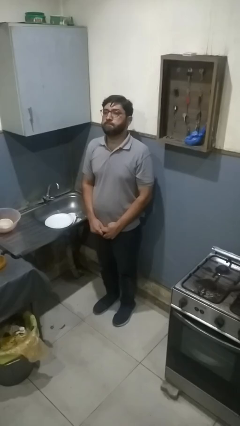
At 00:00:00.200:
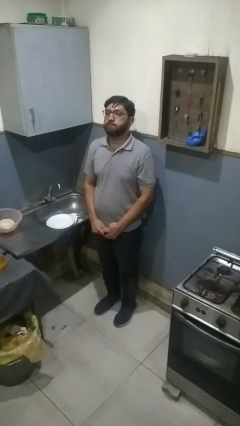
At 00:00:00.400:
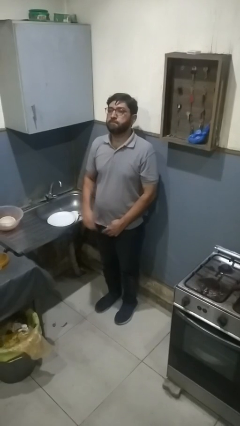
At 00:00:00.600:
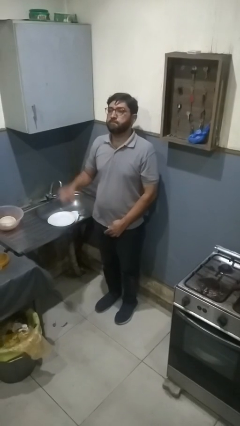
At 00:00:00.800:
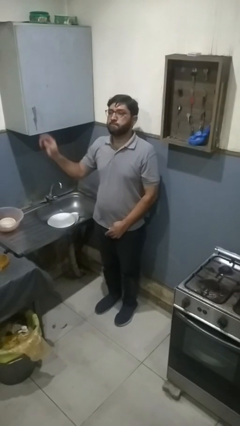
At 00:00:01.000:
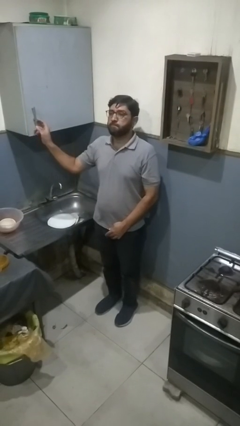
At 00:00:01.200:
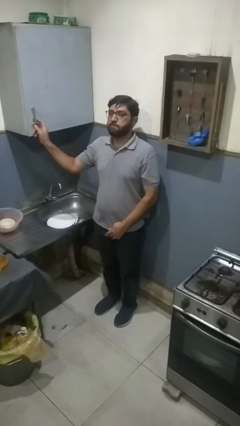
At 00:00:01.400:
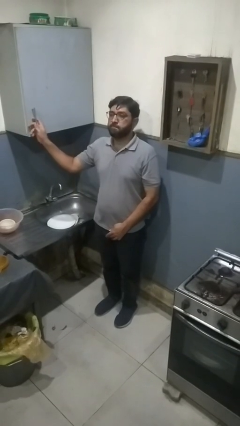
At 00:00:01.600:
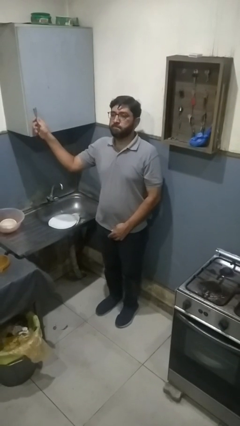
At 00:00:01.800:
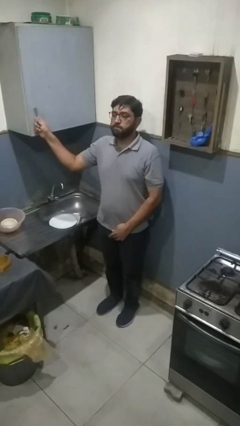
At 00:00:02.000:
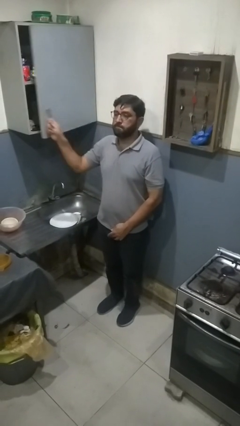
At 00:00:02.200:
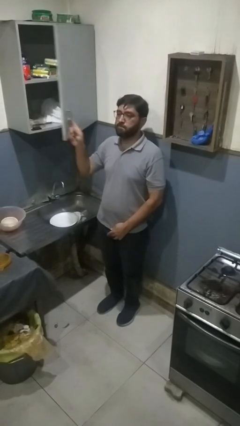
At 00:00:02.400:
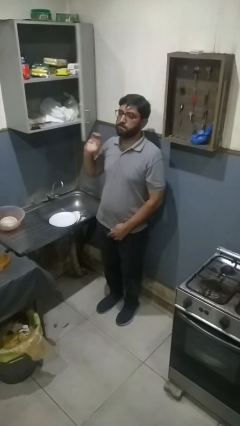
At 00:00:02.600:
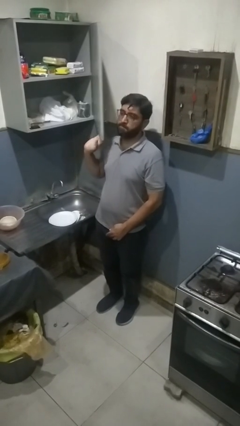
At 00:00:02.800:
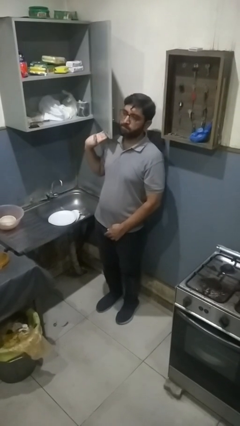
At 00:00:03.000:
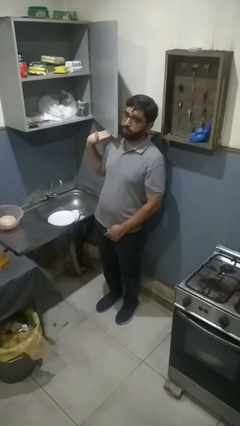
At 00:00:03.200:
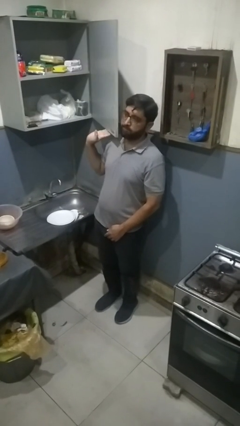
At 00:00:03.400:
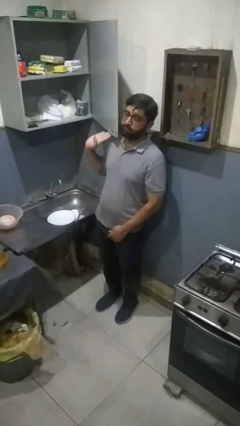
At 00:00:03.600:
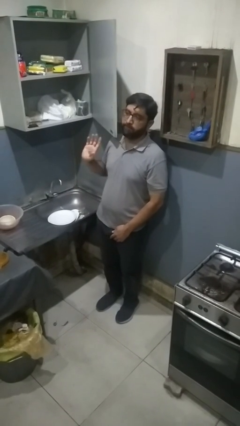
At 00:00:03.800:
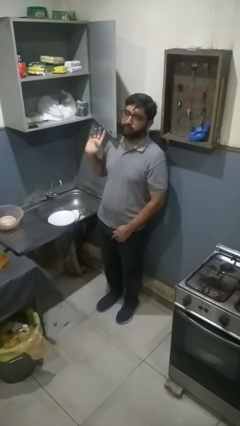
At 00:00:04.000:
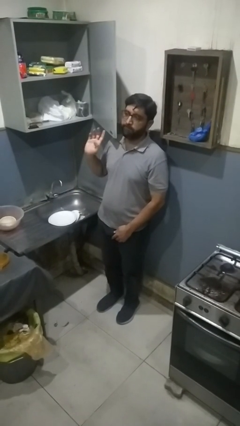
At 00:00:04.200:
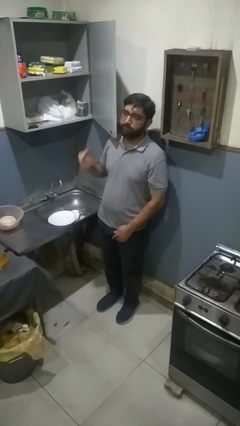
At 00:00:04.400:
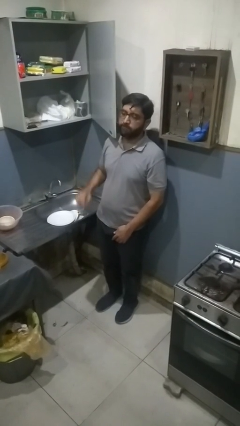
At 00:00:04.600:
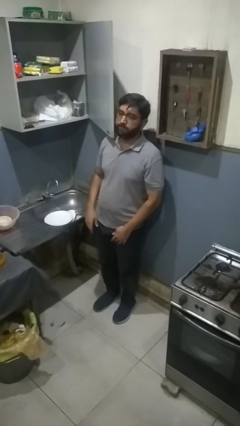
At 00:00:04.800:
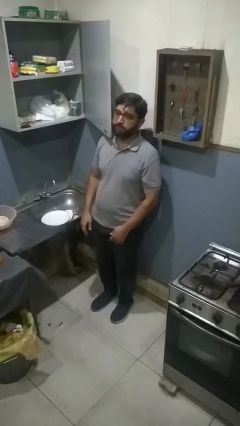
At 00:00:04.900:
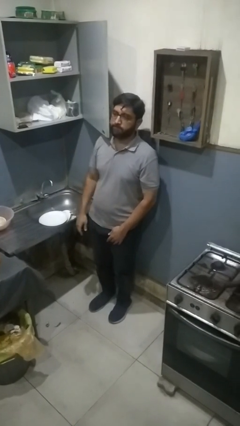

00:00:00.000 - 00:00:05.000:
person opens cabinet

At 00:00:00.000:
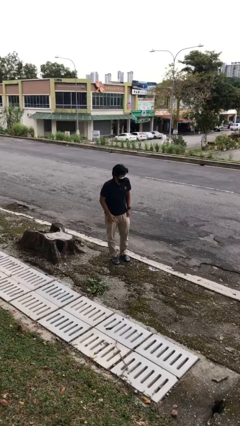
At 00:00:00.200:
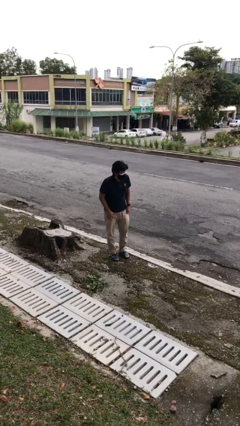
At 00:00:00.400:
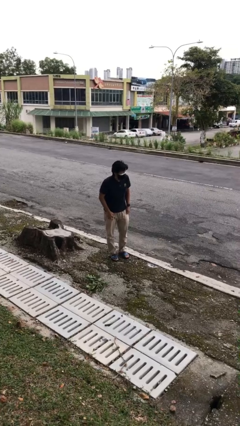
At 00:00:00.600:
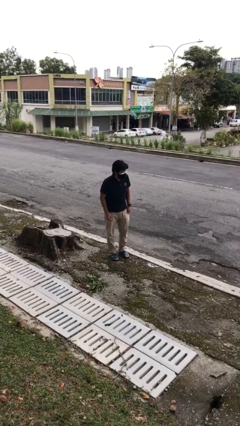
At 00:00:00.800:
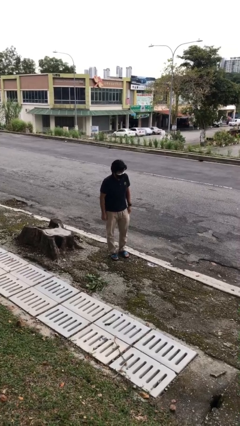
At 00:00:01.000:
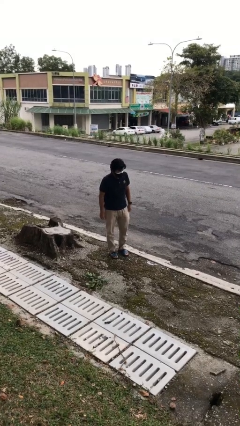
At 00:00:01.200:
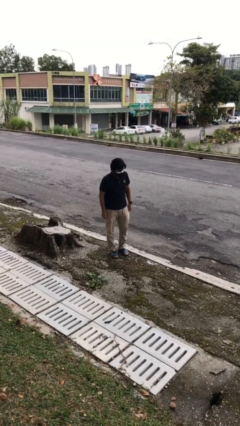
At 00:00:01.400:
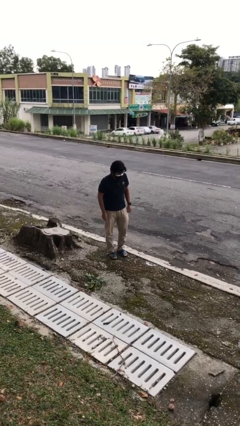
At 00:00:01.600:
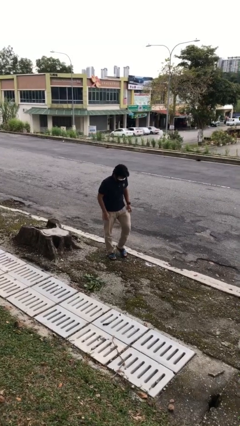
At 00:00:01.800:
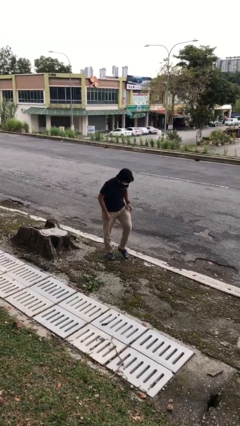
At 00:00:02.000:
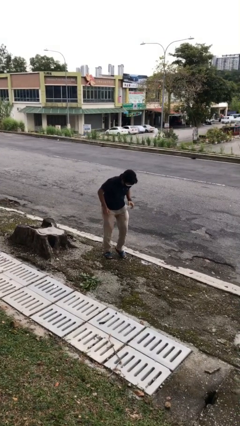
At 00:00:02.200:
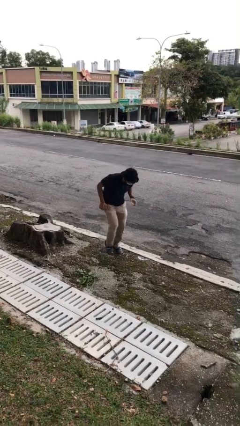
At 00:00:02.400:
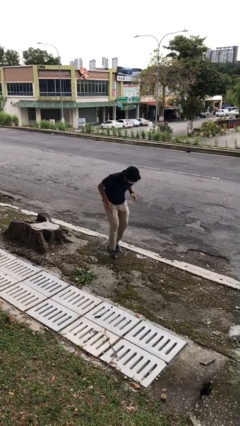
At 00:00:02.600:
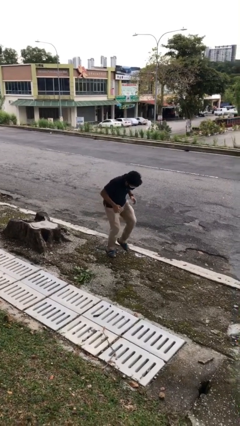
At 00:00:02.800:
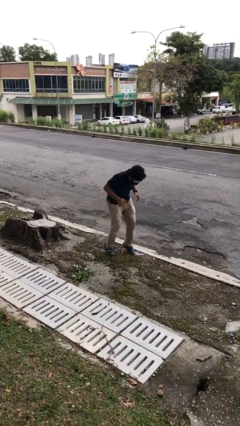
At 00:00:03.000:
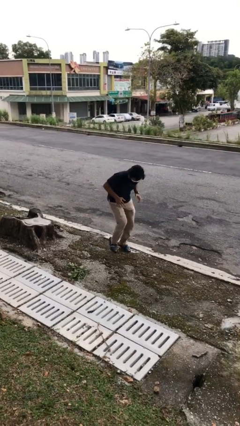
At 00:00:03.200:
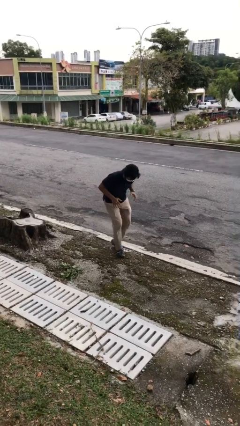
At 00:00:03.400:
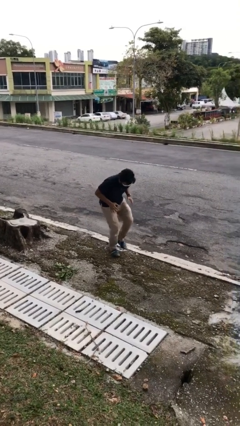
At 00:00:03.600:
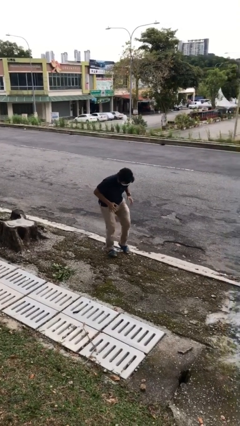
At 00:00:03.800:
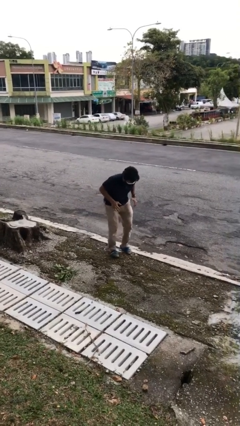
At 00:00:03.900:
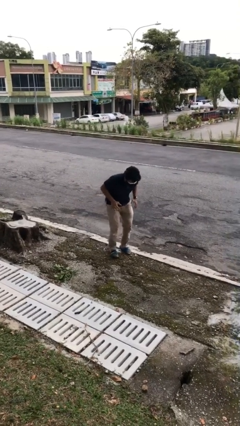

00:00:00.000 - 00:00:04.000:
person walks tiptoe

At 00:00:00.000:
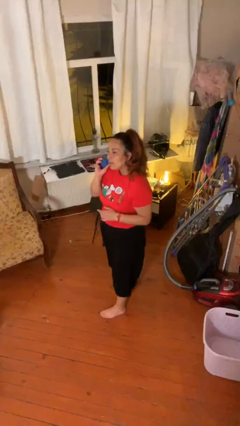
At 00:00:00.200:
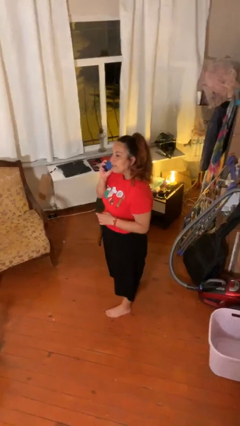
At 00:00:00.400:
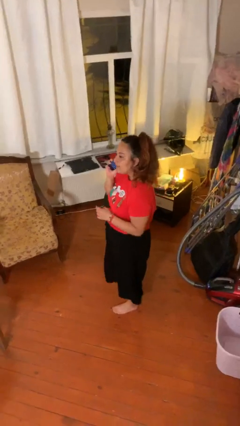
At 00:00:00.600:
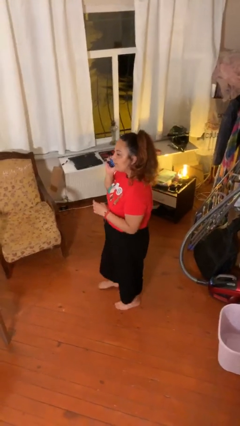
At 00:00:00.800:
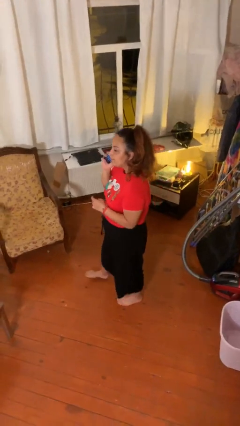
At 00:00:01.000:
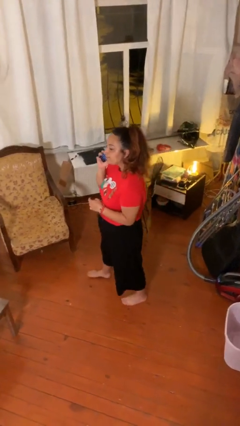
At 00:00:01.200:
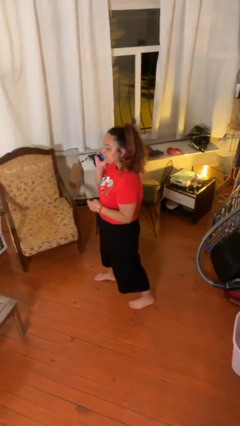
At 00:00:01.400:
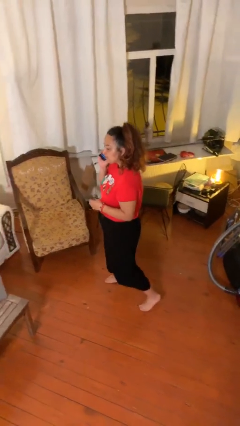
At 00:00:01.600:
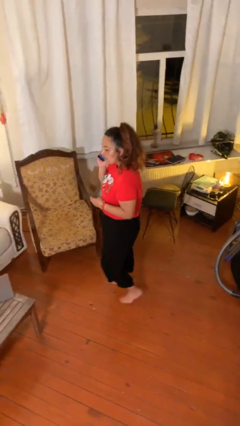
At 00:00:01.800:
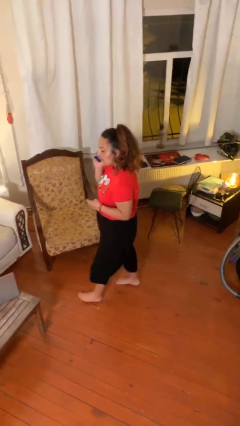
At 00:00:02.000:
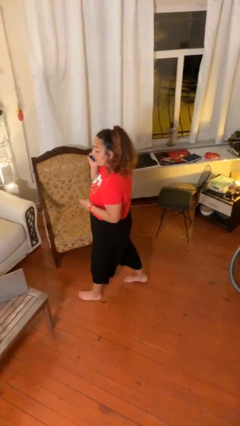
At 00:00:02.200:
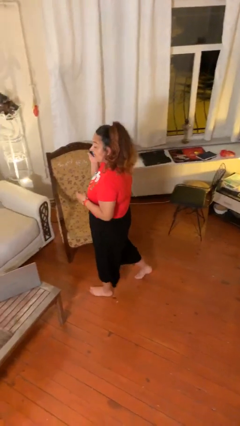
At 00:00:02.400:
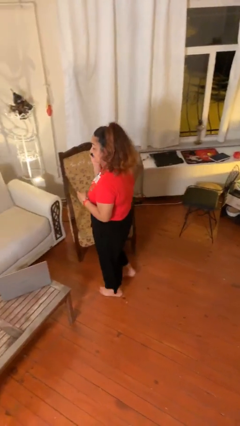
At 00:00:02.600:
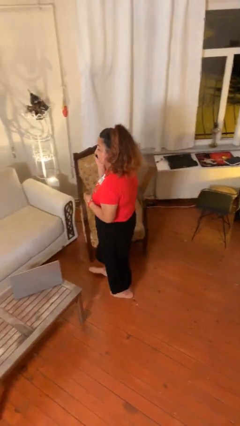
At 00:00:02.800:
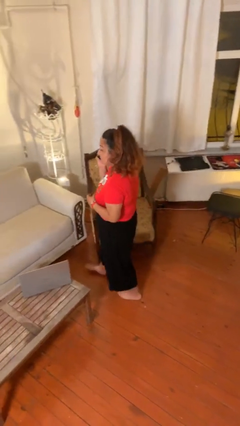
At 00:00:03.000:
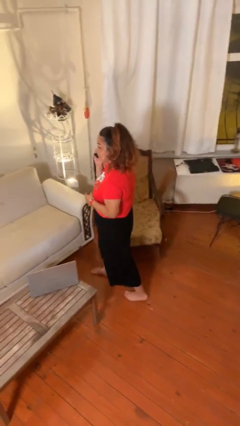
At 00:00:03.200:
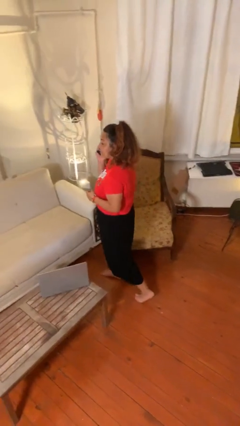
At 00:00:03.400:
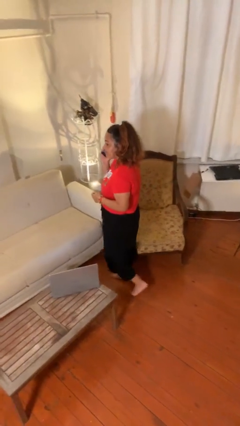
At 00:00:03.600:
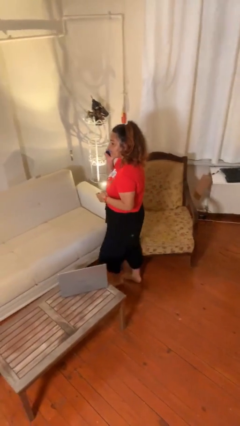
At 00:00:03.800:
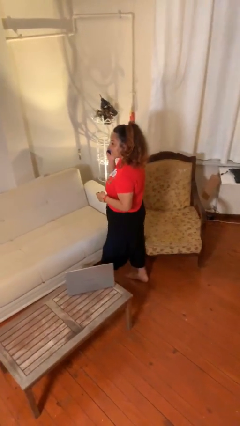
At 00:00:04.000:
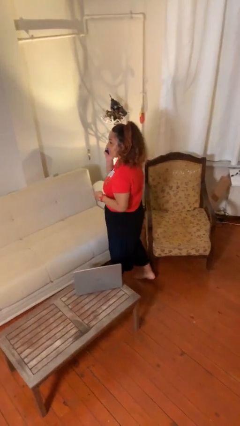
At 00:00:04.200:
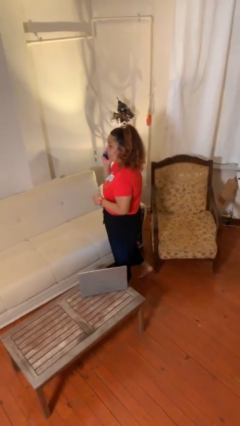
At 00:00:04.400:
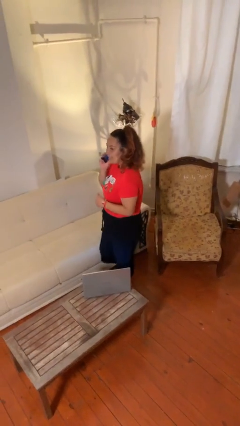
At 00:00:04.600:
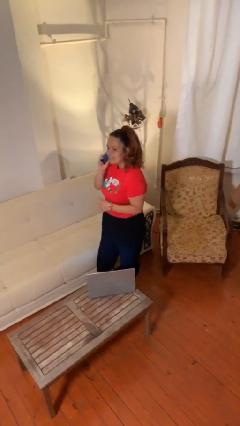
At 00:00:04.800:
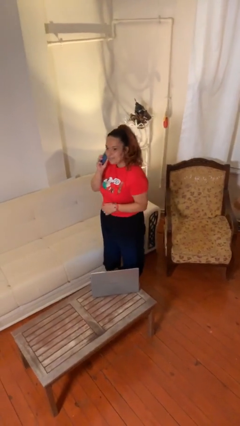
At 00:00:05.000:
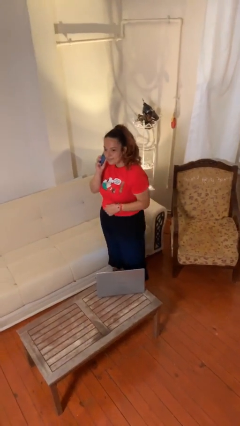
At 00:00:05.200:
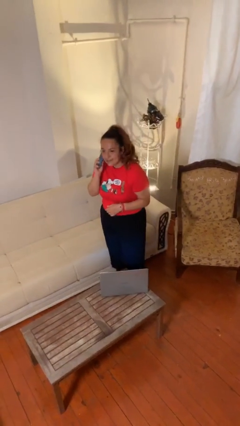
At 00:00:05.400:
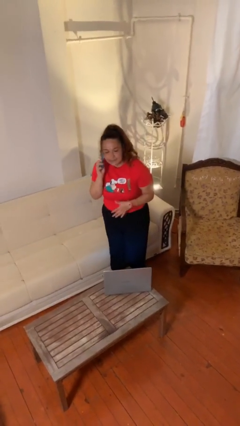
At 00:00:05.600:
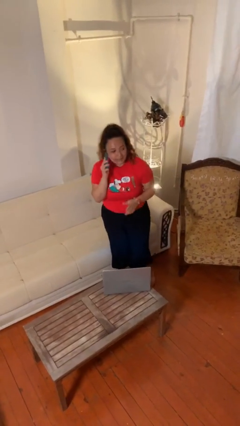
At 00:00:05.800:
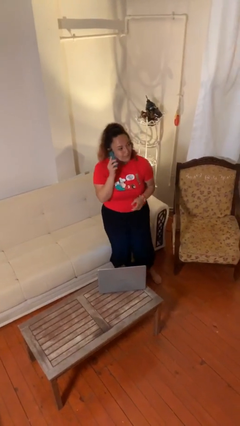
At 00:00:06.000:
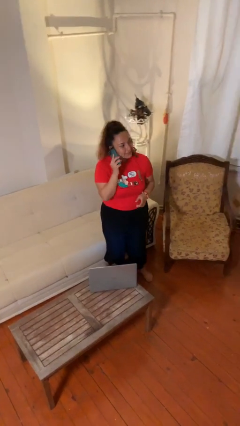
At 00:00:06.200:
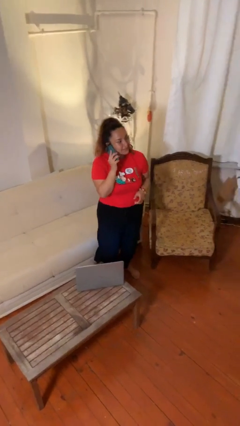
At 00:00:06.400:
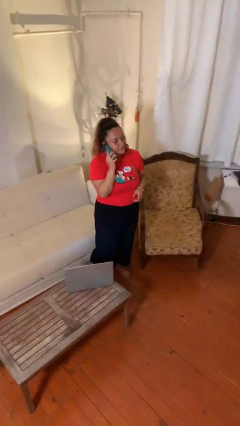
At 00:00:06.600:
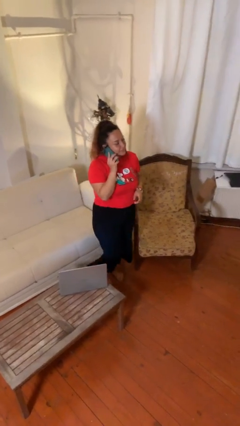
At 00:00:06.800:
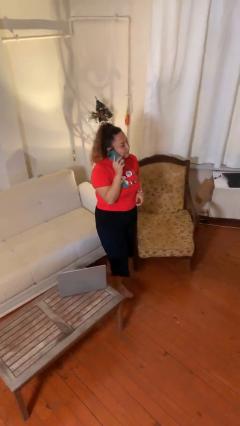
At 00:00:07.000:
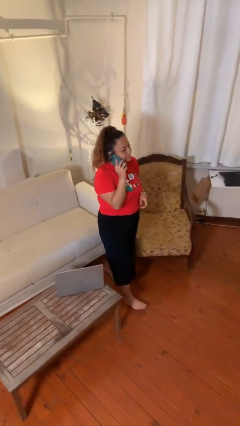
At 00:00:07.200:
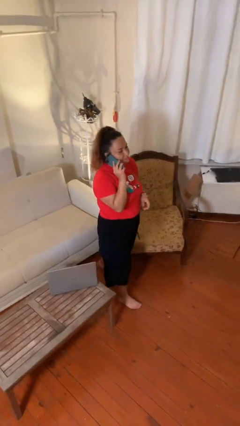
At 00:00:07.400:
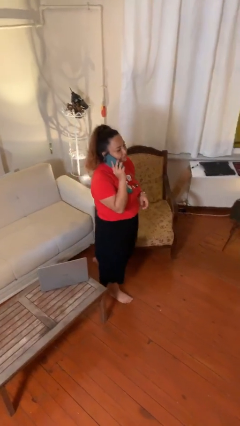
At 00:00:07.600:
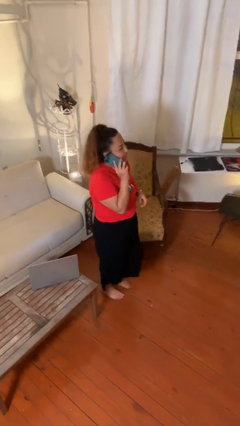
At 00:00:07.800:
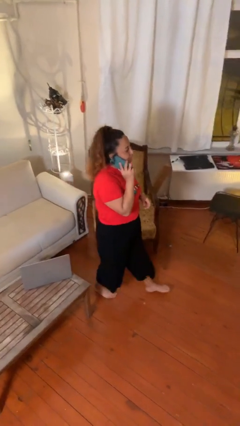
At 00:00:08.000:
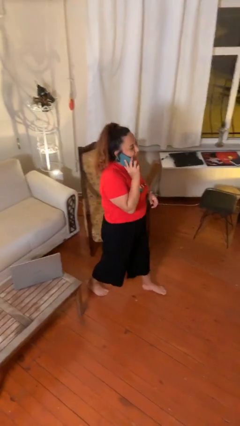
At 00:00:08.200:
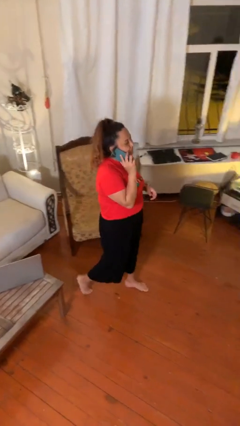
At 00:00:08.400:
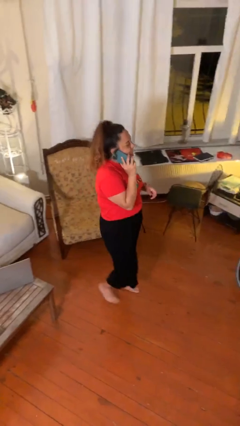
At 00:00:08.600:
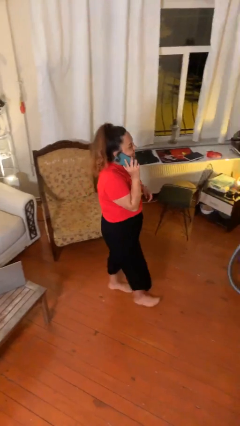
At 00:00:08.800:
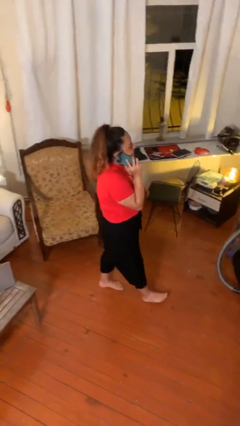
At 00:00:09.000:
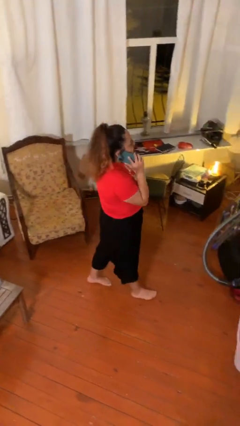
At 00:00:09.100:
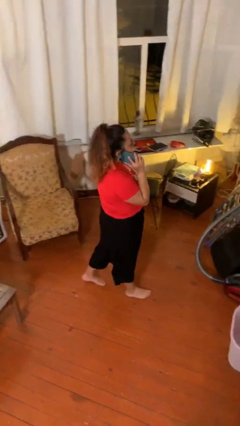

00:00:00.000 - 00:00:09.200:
person talks on phone
